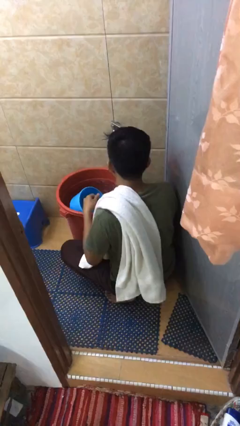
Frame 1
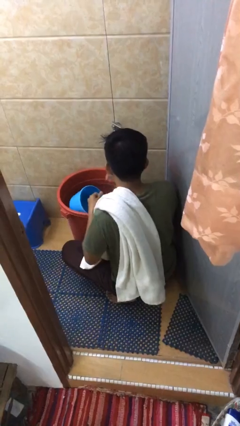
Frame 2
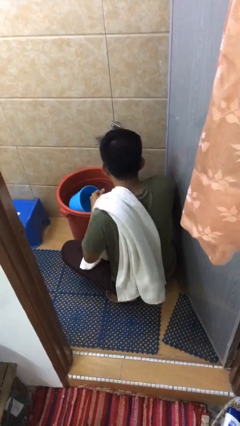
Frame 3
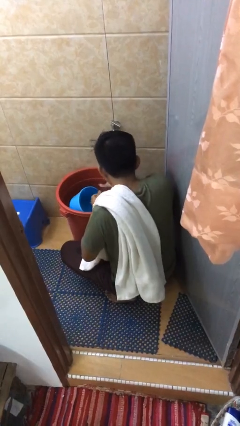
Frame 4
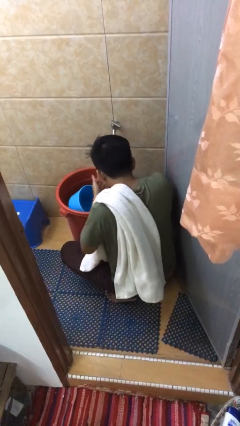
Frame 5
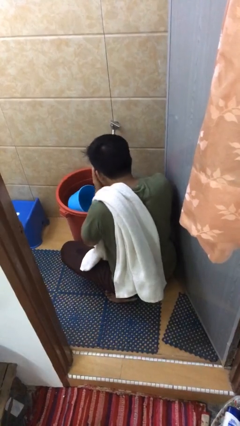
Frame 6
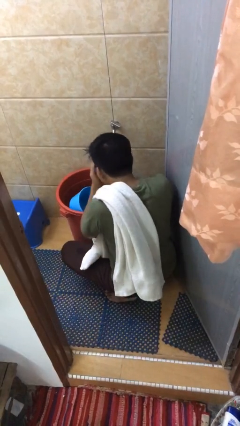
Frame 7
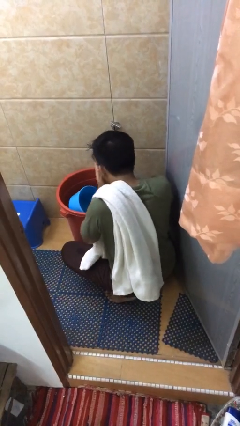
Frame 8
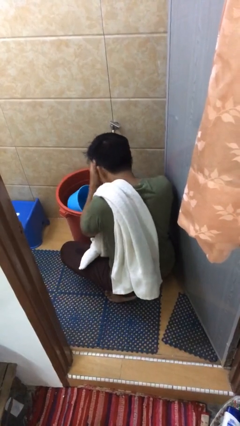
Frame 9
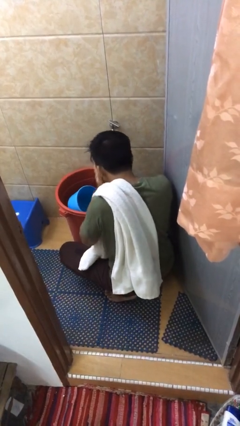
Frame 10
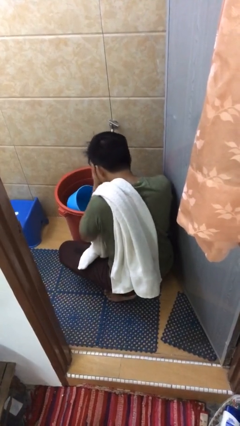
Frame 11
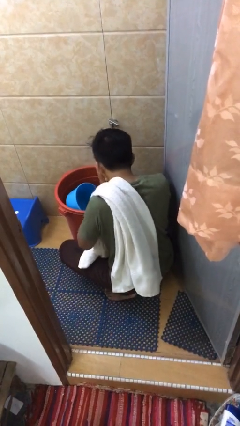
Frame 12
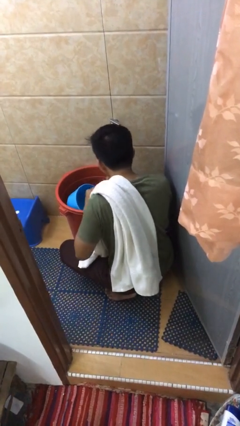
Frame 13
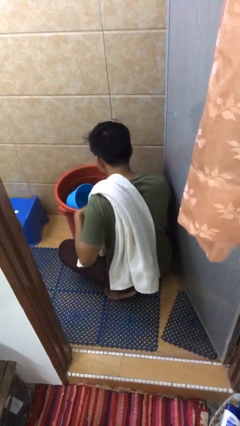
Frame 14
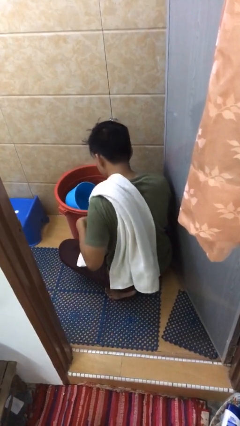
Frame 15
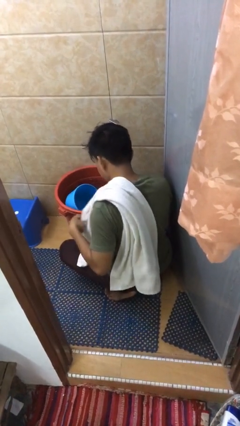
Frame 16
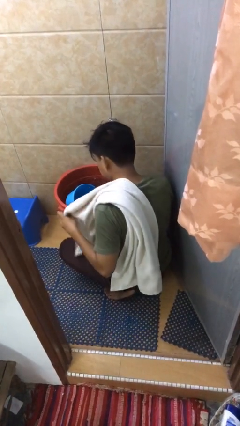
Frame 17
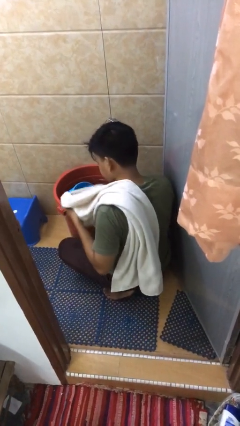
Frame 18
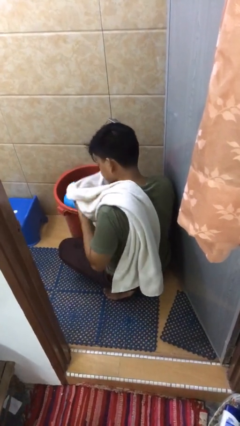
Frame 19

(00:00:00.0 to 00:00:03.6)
person washes face

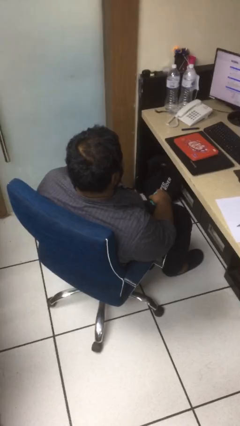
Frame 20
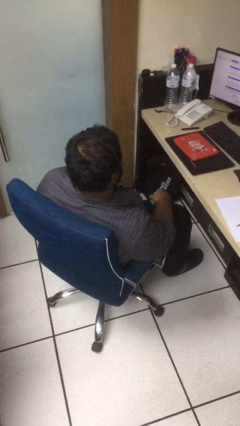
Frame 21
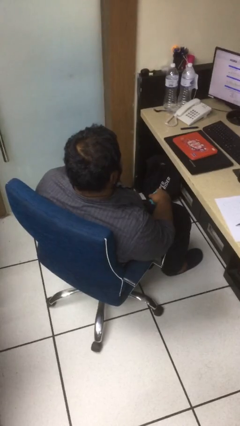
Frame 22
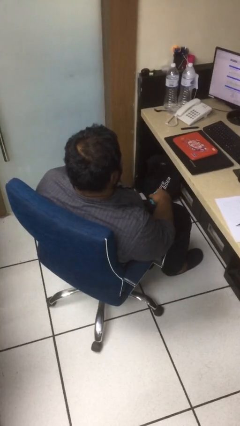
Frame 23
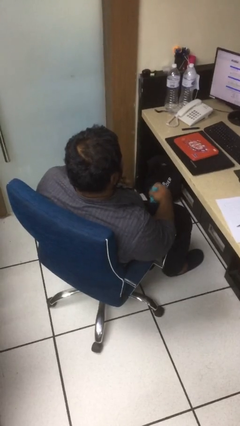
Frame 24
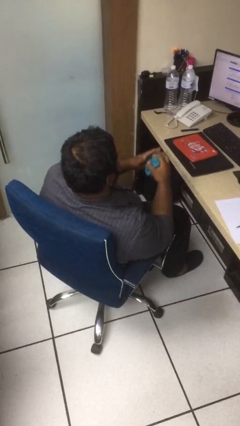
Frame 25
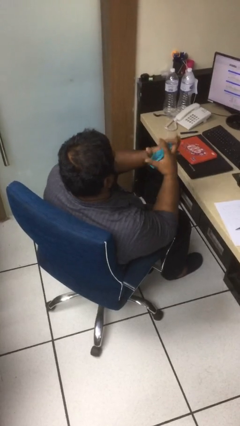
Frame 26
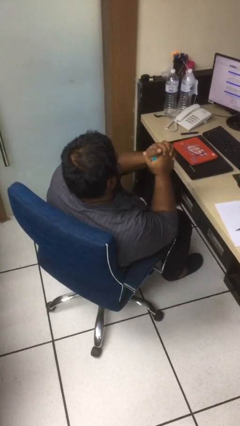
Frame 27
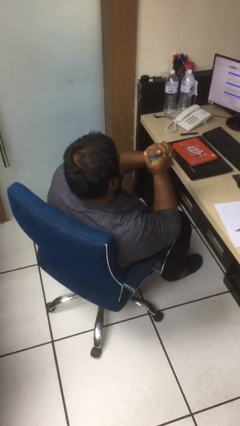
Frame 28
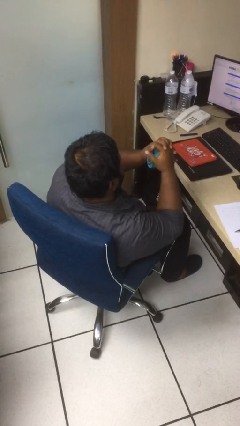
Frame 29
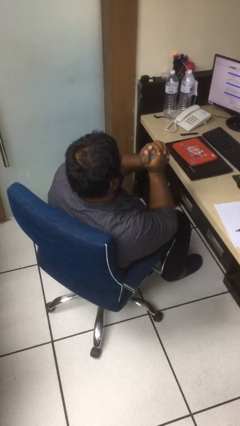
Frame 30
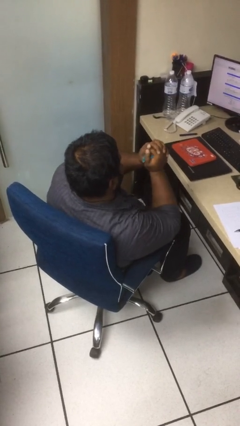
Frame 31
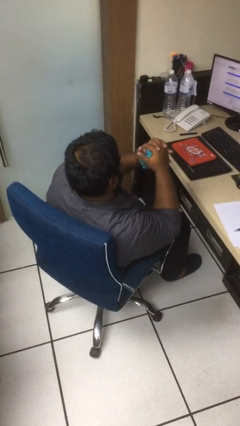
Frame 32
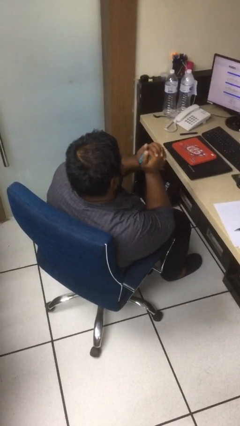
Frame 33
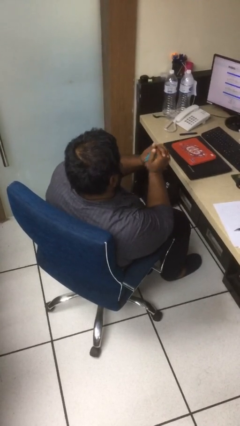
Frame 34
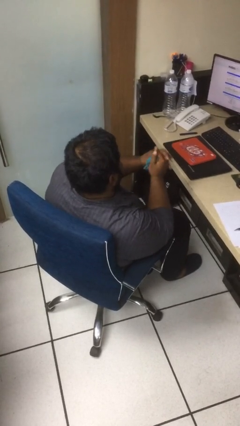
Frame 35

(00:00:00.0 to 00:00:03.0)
person squeezes object

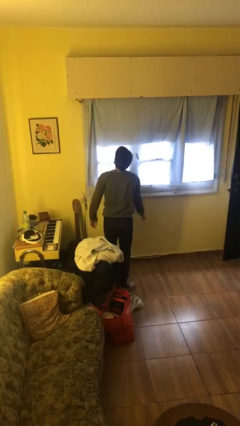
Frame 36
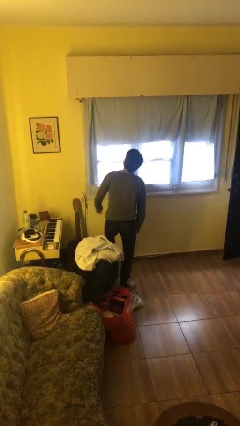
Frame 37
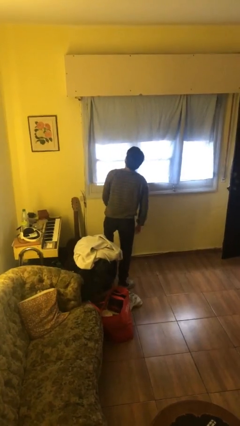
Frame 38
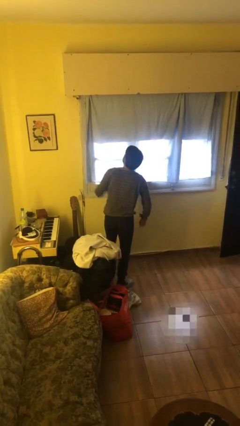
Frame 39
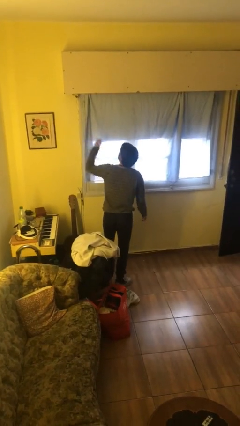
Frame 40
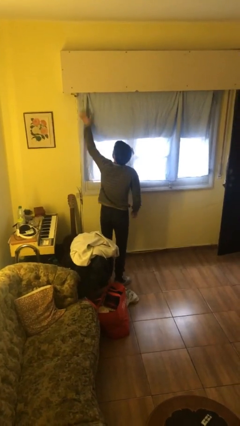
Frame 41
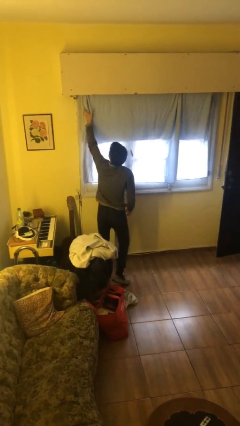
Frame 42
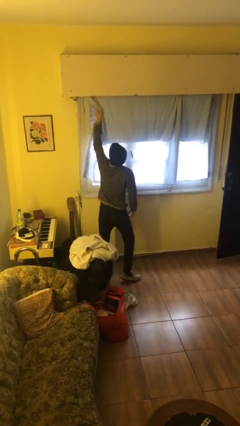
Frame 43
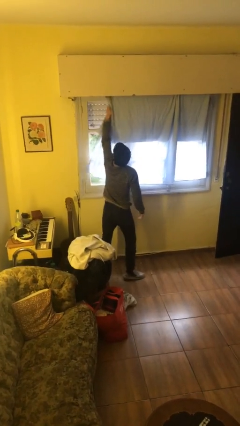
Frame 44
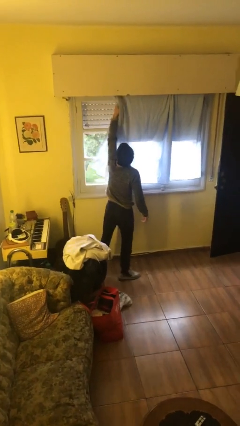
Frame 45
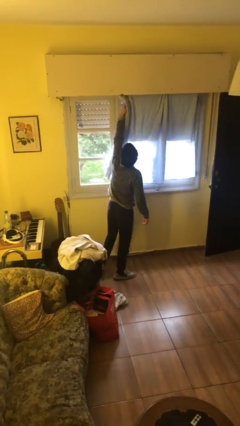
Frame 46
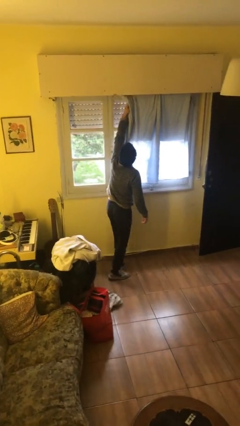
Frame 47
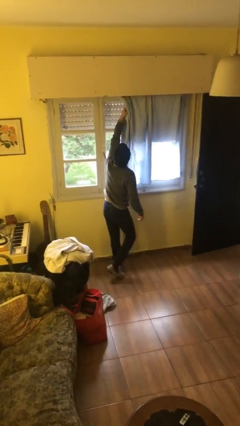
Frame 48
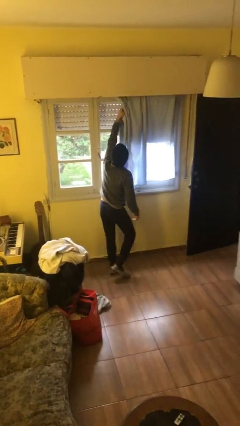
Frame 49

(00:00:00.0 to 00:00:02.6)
person opens curtains

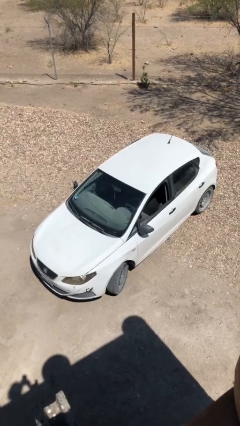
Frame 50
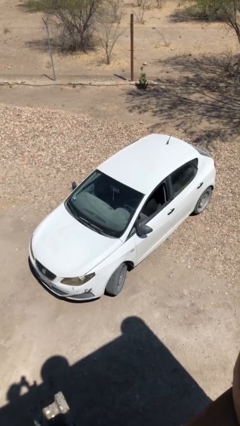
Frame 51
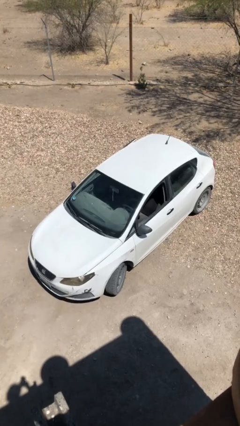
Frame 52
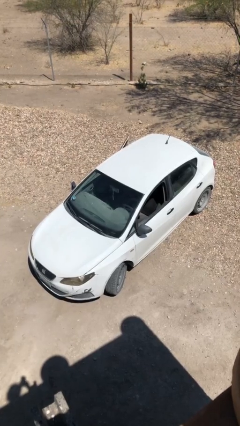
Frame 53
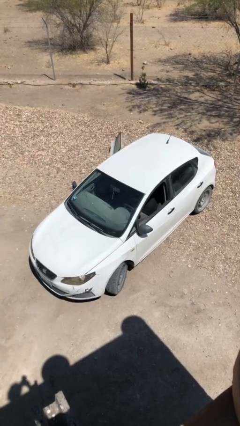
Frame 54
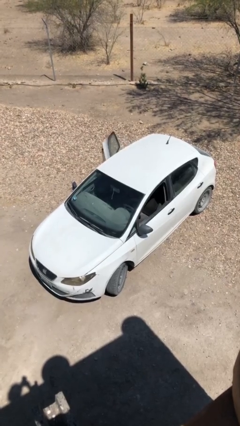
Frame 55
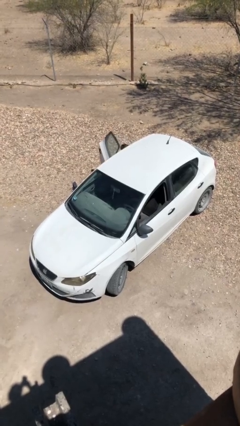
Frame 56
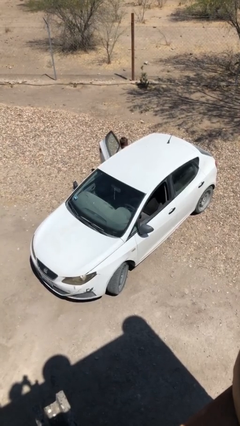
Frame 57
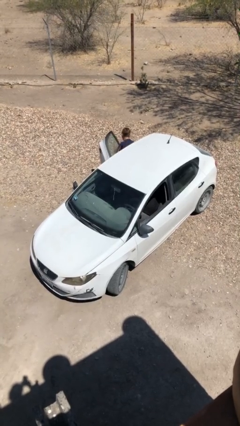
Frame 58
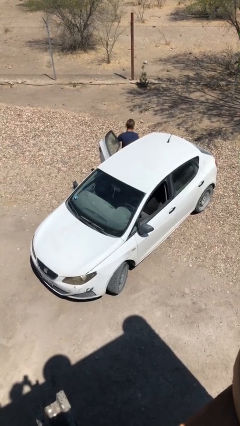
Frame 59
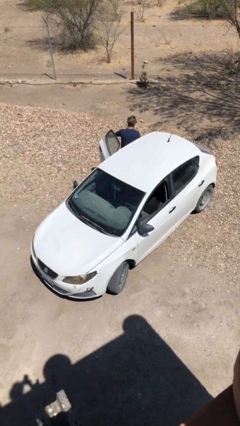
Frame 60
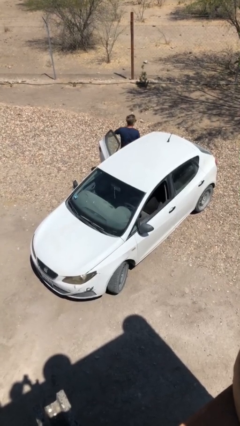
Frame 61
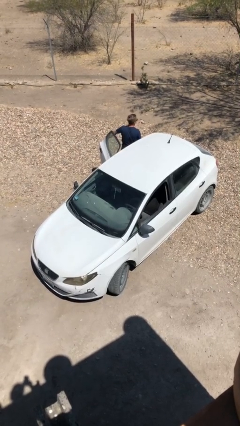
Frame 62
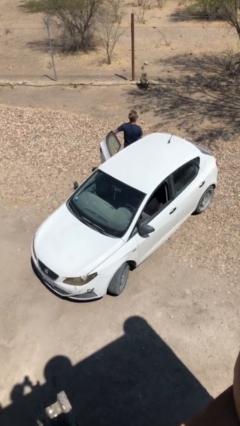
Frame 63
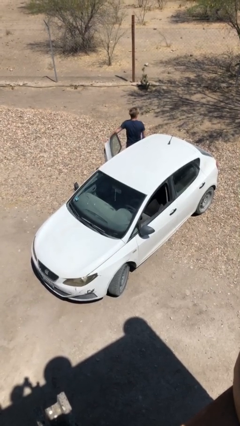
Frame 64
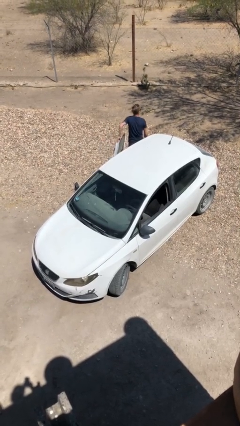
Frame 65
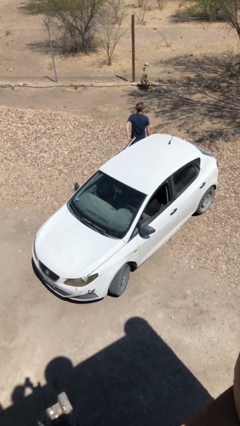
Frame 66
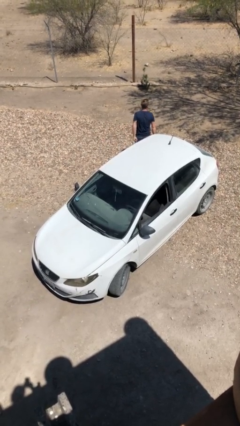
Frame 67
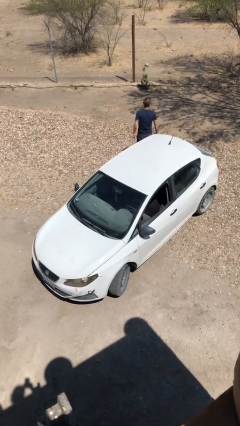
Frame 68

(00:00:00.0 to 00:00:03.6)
car drops off person

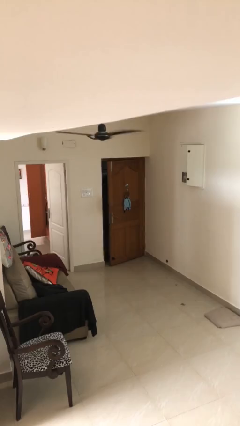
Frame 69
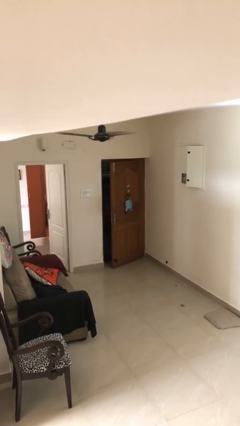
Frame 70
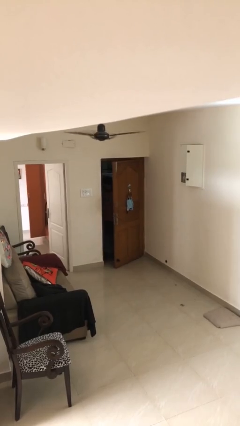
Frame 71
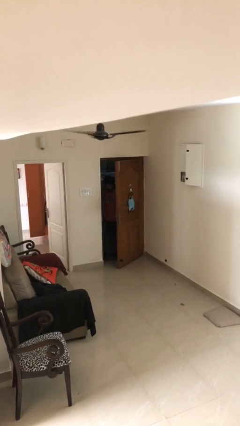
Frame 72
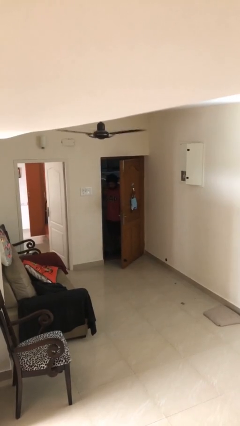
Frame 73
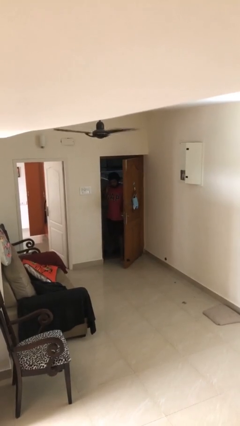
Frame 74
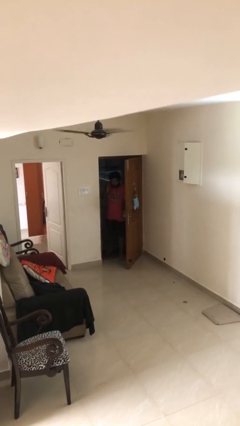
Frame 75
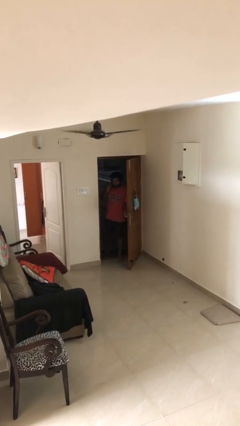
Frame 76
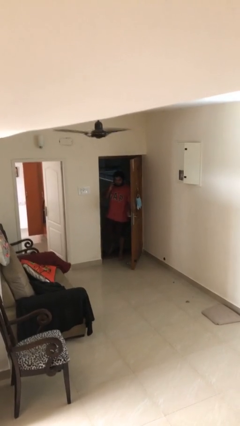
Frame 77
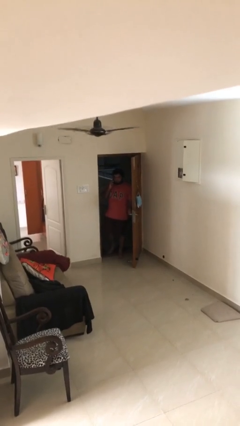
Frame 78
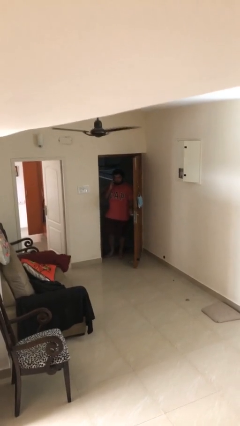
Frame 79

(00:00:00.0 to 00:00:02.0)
person opens facility door

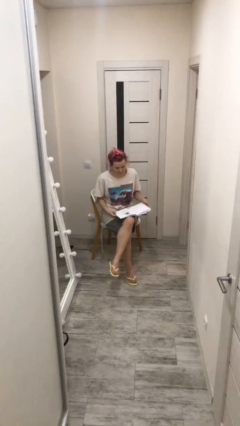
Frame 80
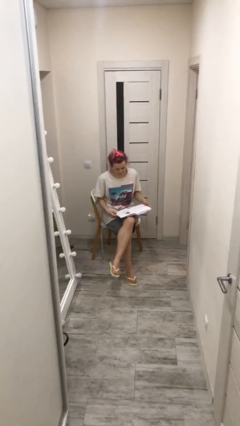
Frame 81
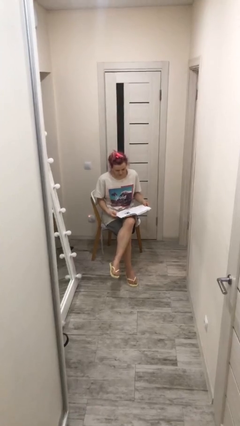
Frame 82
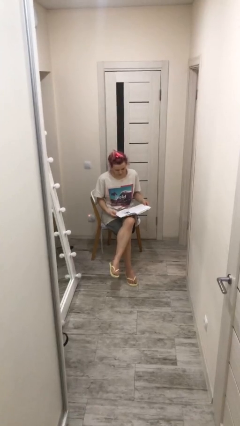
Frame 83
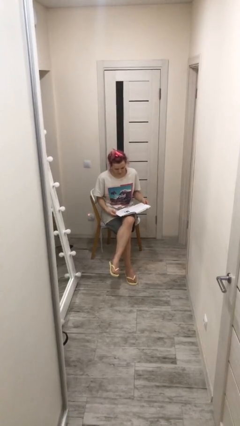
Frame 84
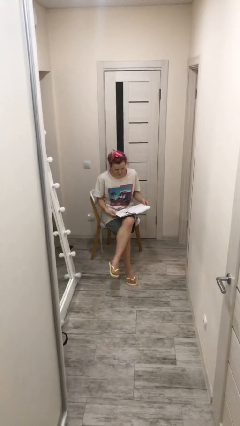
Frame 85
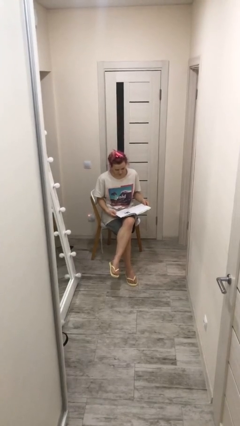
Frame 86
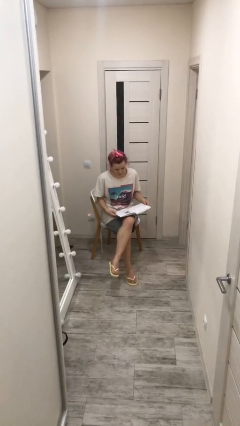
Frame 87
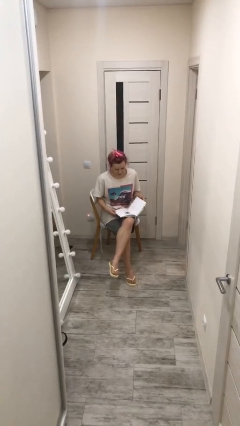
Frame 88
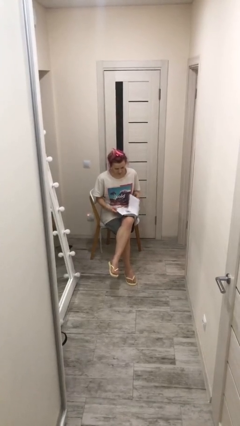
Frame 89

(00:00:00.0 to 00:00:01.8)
person reads document

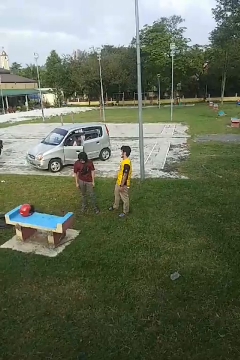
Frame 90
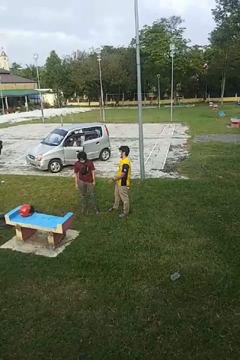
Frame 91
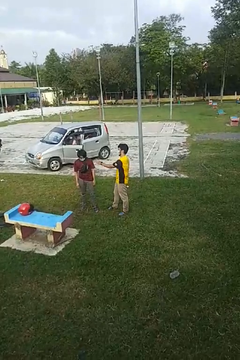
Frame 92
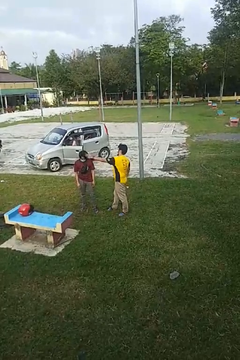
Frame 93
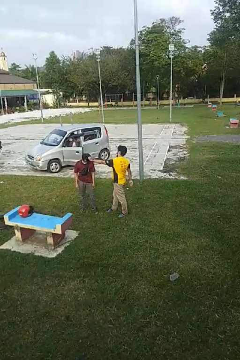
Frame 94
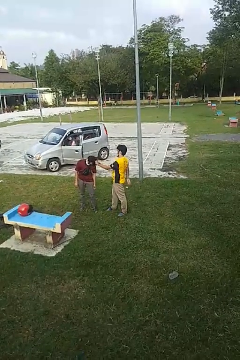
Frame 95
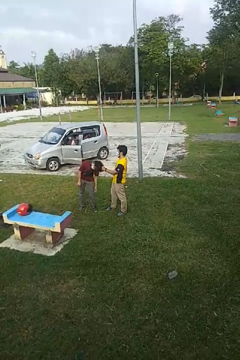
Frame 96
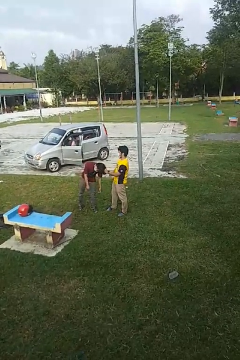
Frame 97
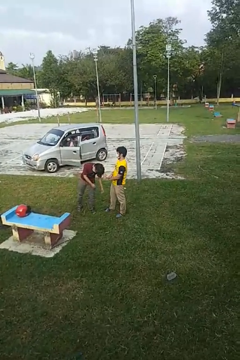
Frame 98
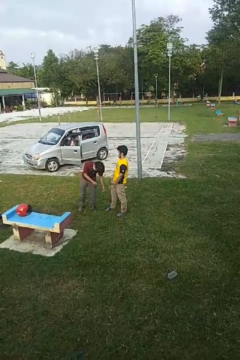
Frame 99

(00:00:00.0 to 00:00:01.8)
person grabs person by hair
